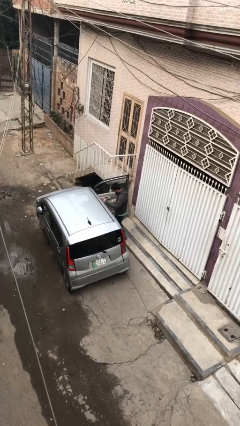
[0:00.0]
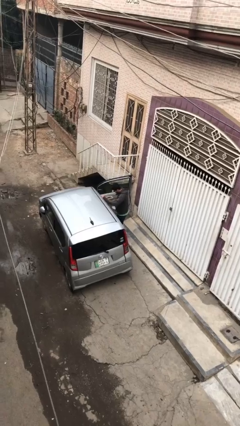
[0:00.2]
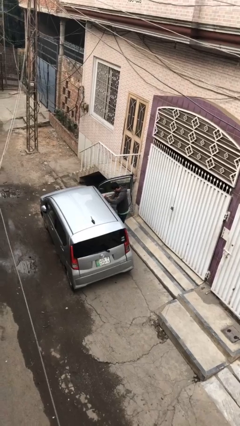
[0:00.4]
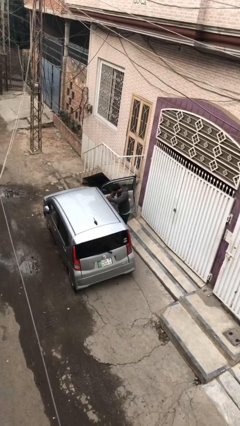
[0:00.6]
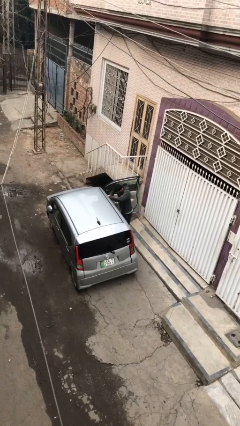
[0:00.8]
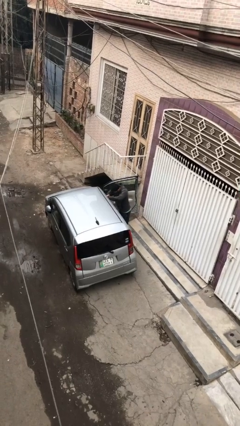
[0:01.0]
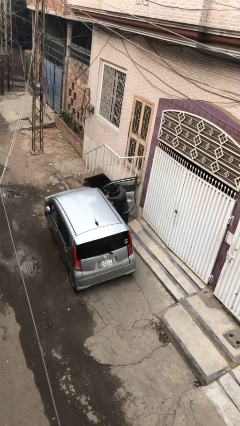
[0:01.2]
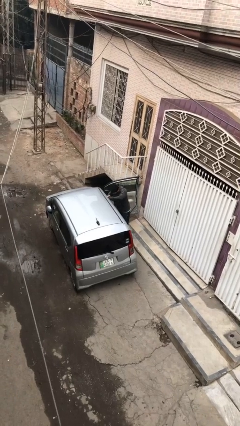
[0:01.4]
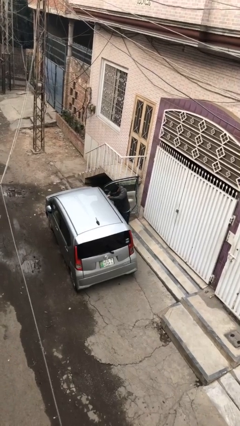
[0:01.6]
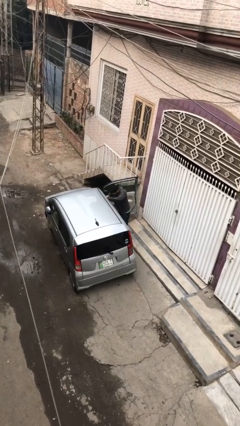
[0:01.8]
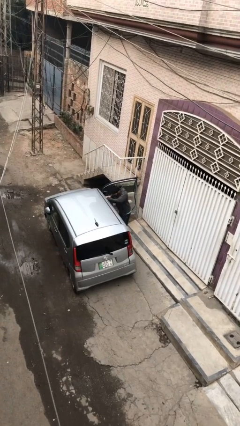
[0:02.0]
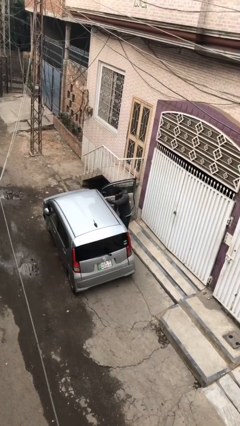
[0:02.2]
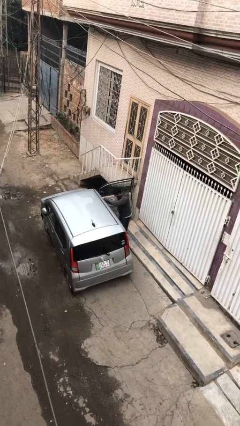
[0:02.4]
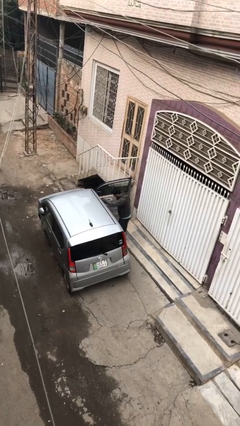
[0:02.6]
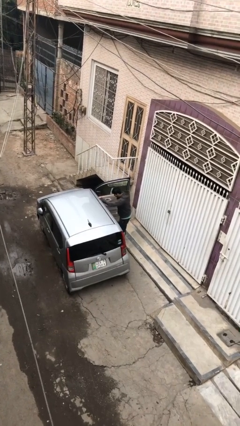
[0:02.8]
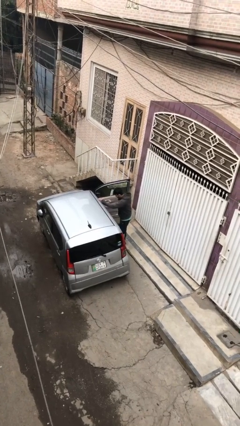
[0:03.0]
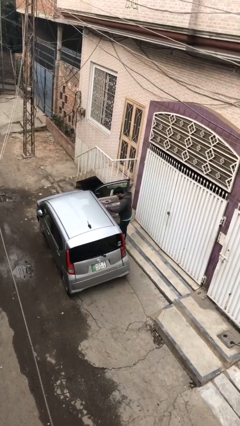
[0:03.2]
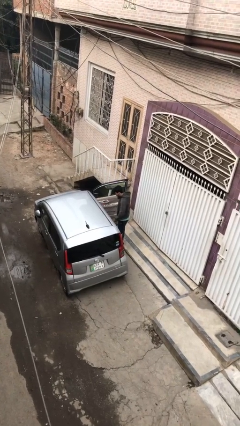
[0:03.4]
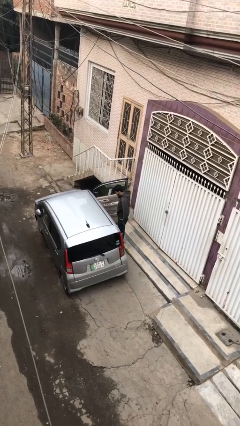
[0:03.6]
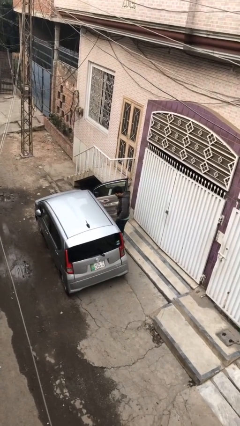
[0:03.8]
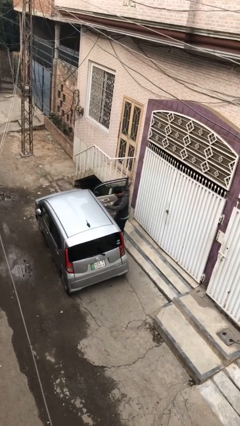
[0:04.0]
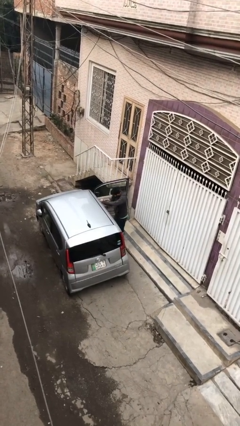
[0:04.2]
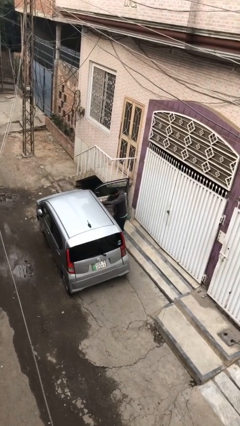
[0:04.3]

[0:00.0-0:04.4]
person loads car

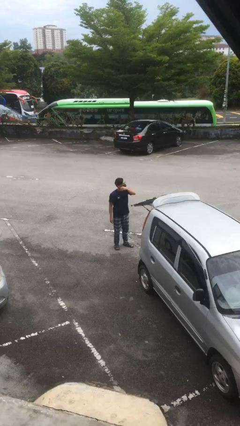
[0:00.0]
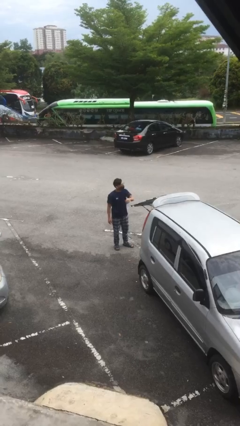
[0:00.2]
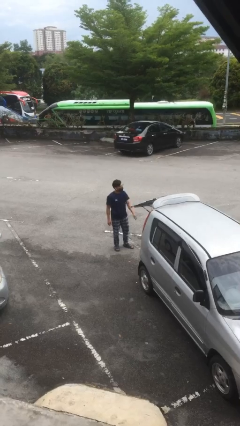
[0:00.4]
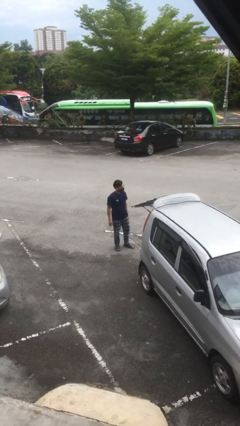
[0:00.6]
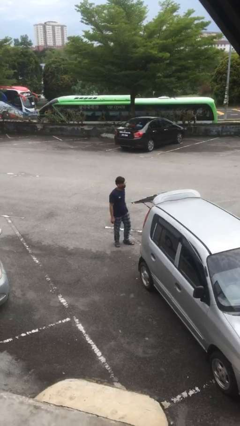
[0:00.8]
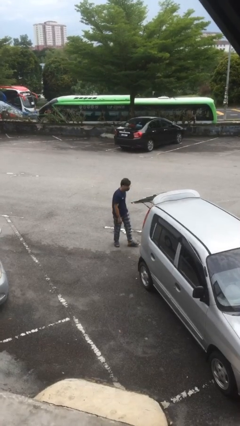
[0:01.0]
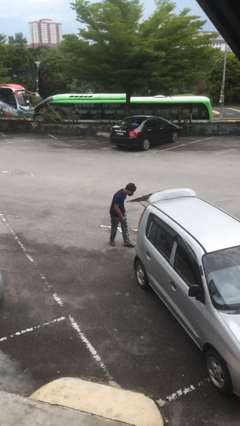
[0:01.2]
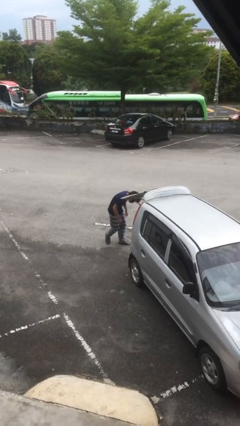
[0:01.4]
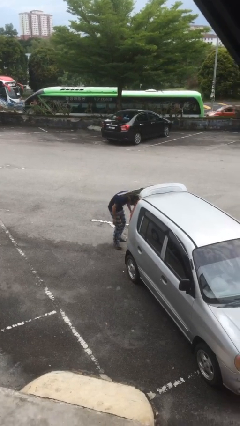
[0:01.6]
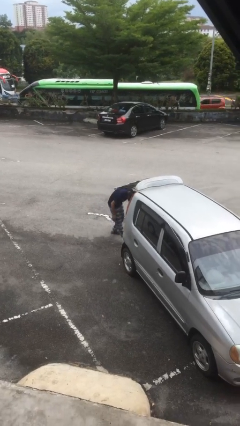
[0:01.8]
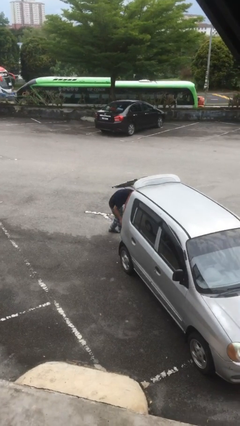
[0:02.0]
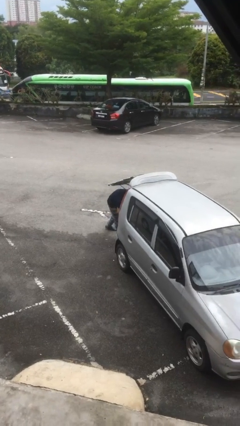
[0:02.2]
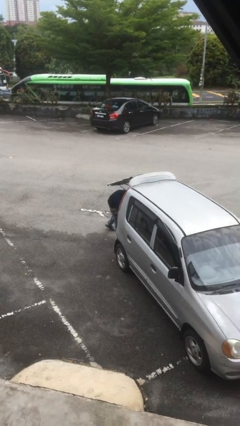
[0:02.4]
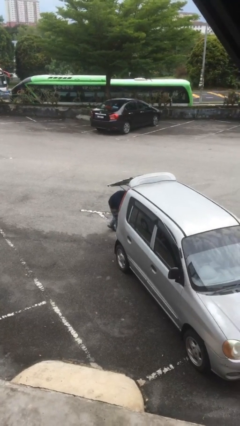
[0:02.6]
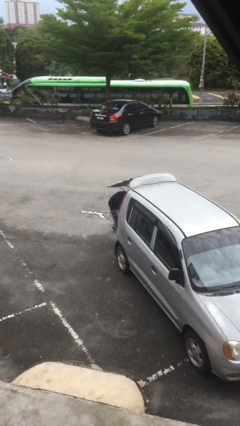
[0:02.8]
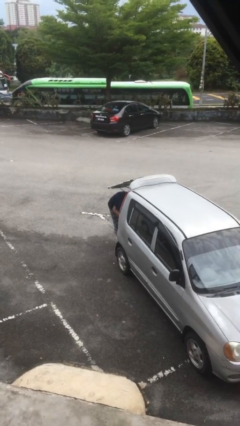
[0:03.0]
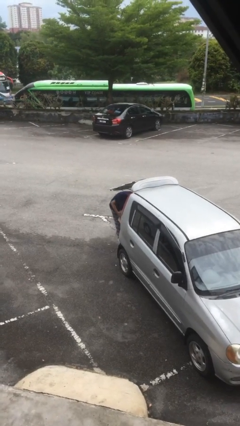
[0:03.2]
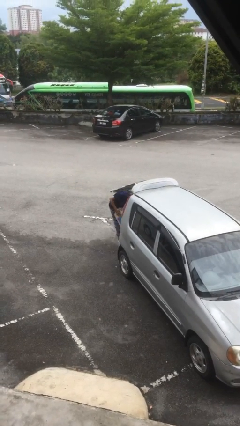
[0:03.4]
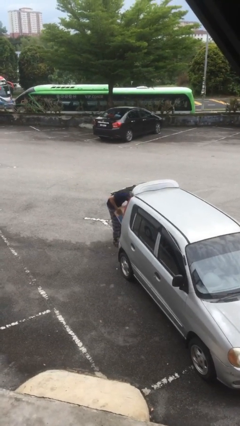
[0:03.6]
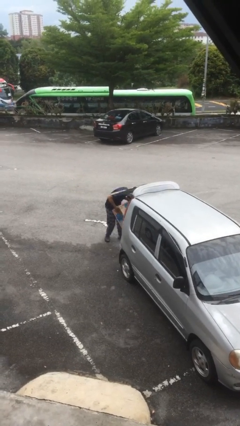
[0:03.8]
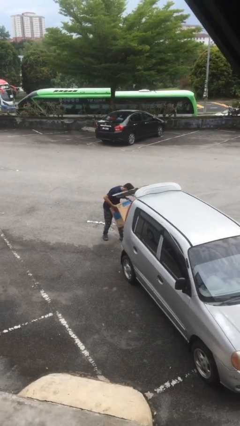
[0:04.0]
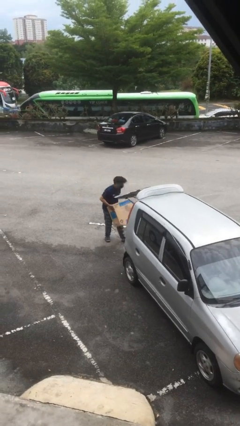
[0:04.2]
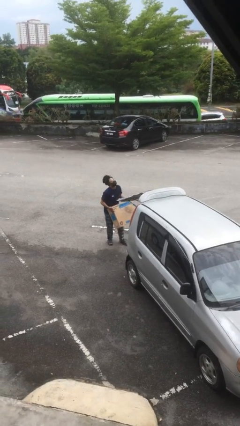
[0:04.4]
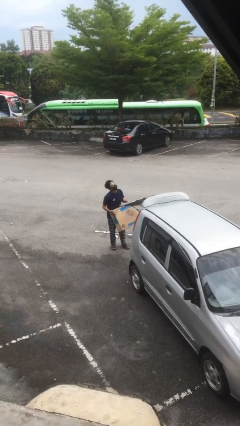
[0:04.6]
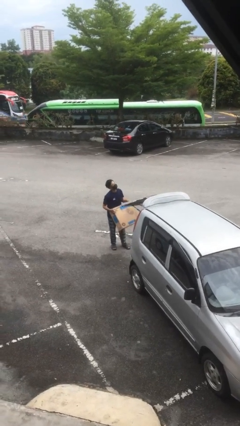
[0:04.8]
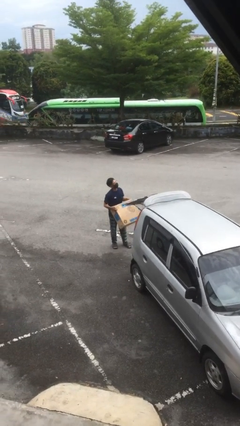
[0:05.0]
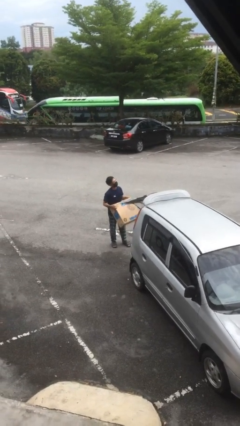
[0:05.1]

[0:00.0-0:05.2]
person unloads car

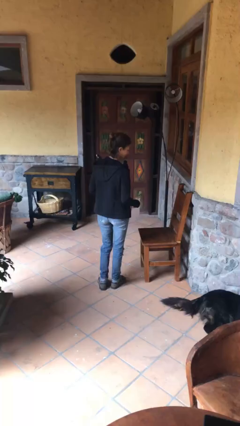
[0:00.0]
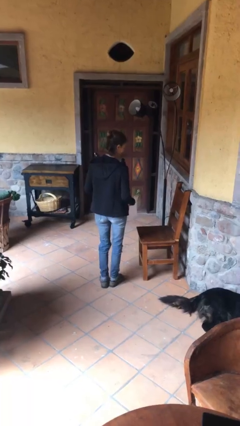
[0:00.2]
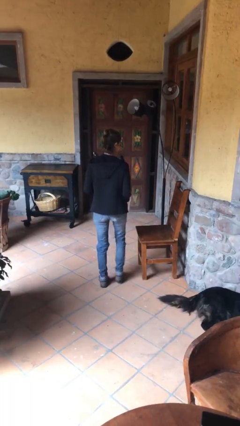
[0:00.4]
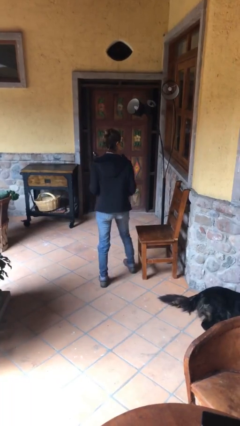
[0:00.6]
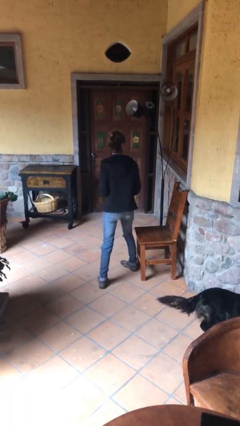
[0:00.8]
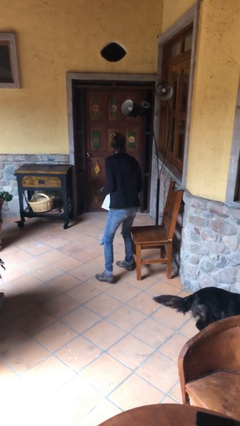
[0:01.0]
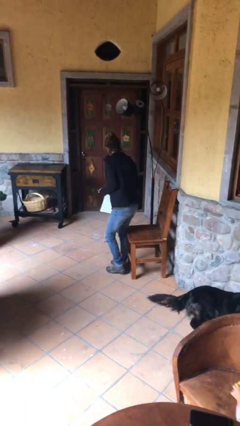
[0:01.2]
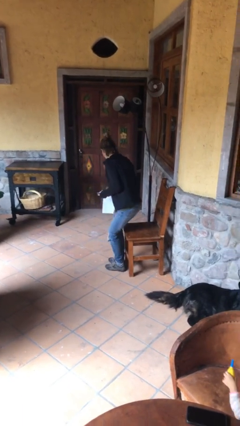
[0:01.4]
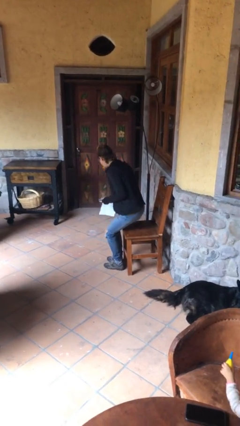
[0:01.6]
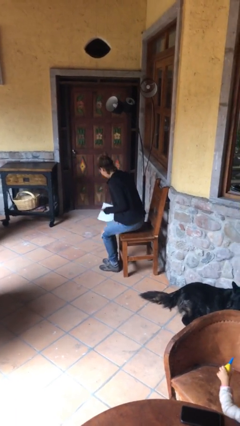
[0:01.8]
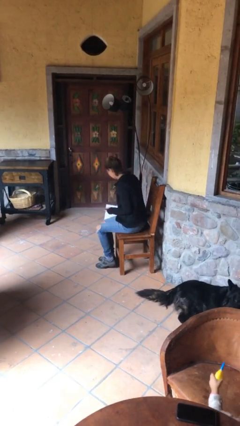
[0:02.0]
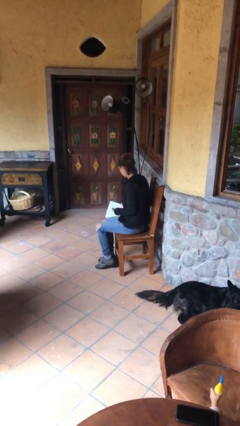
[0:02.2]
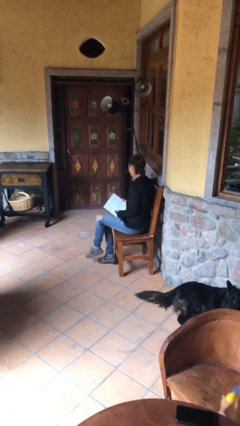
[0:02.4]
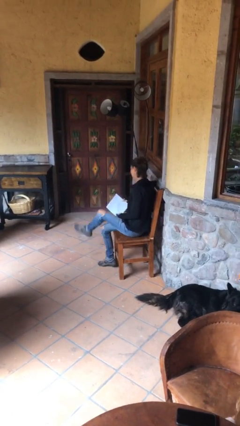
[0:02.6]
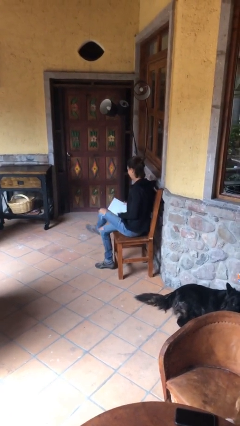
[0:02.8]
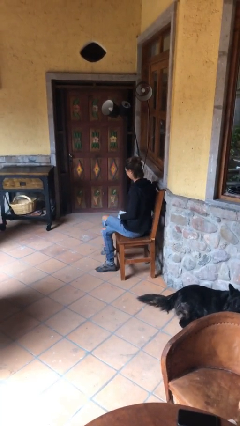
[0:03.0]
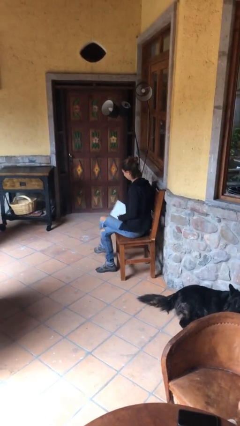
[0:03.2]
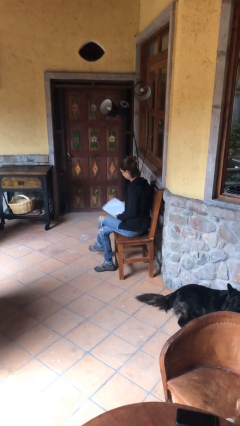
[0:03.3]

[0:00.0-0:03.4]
person sits down

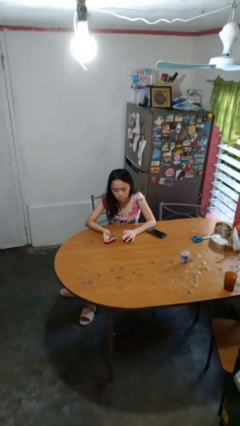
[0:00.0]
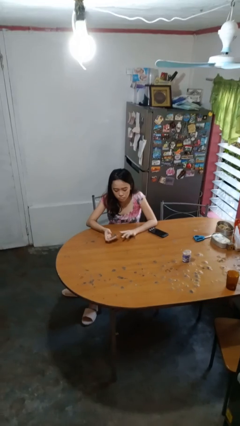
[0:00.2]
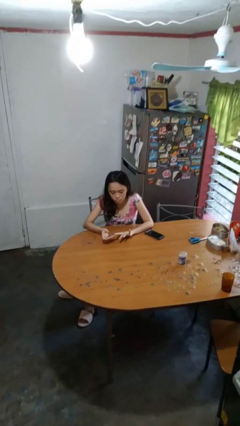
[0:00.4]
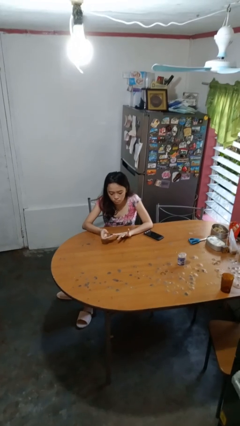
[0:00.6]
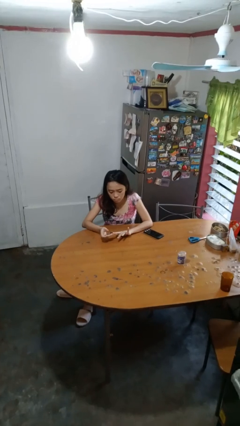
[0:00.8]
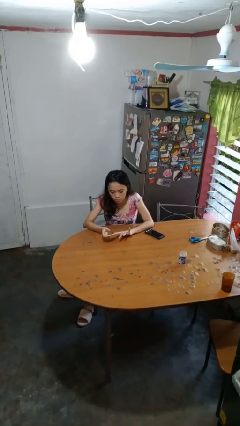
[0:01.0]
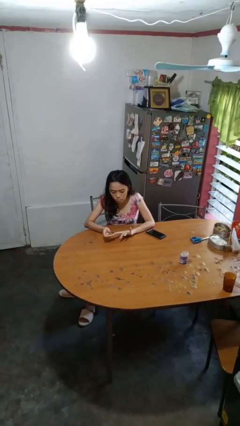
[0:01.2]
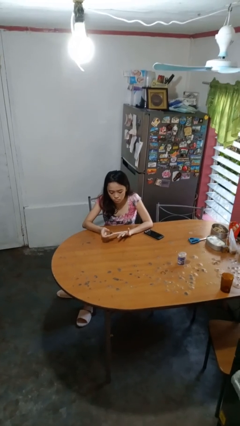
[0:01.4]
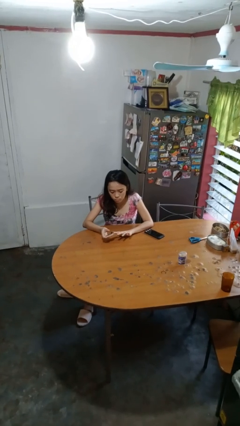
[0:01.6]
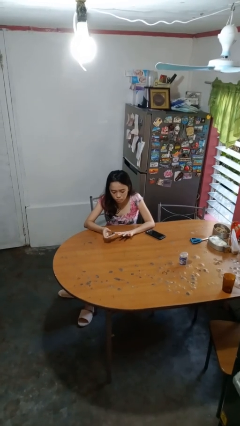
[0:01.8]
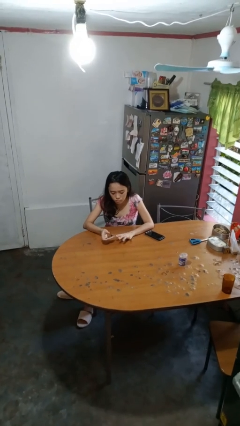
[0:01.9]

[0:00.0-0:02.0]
person clips fingernails

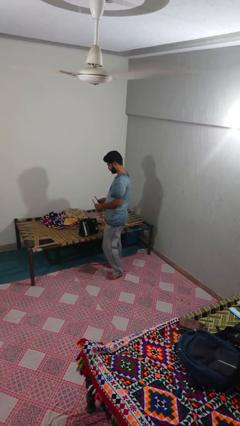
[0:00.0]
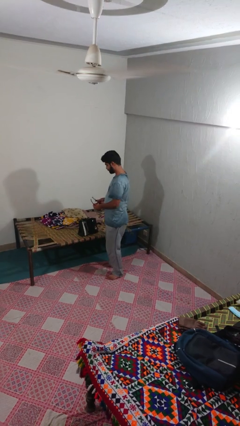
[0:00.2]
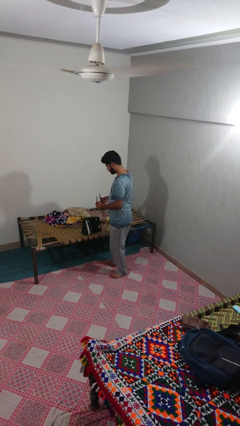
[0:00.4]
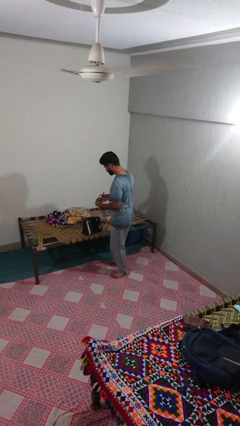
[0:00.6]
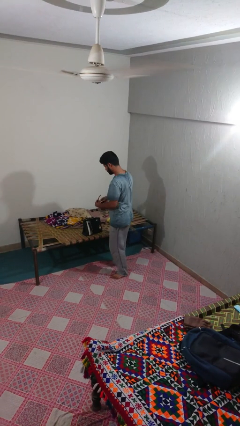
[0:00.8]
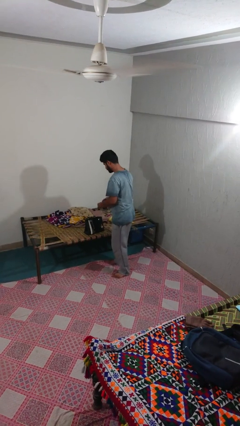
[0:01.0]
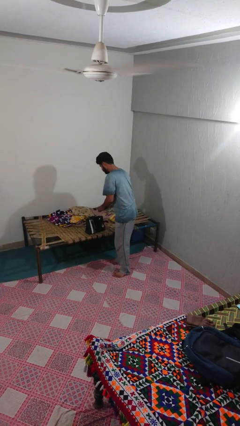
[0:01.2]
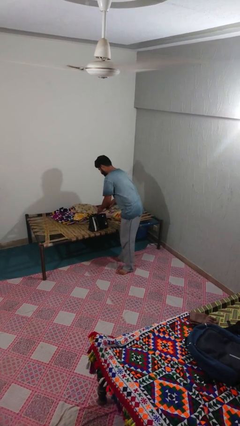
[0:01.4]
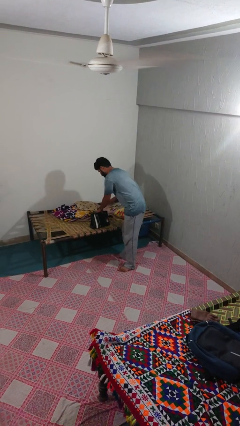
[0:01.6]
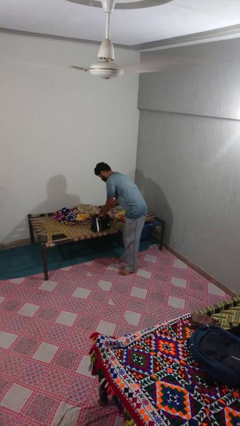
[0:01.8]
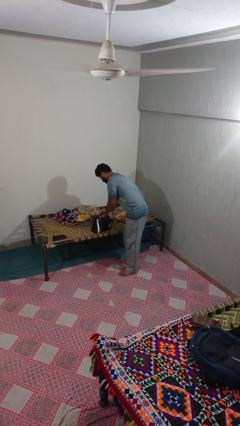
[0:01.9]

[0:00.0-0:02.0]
person puts object into purse

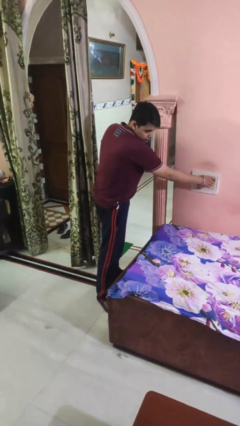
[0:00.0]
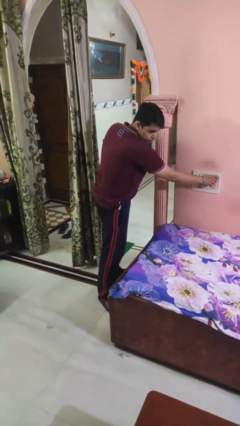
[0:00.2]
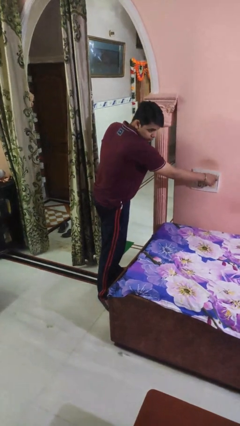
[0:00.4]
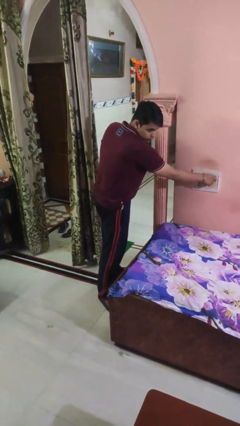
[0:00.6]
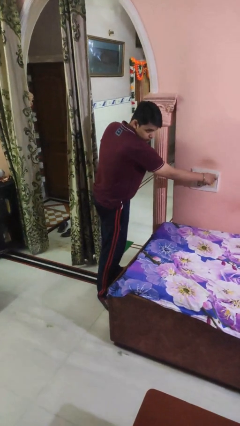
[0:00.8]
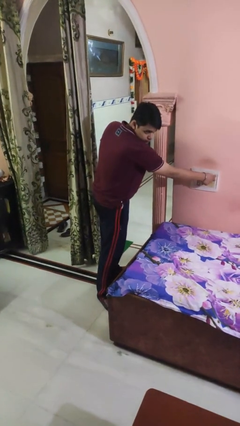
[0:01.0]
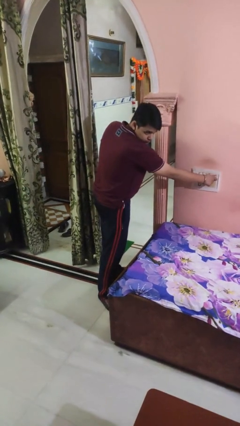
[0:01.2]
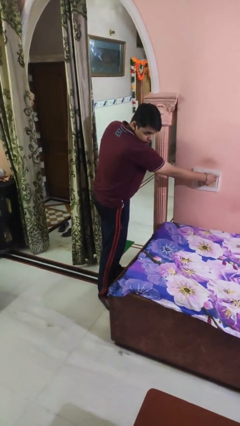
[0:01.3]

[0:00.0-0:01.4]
person adjusts thermostat
